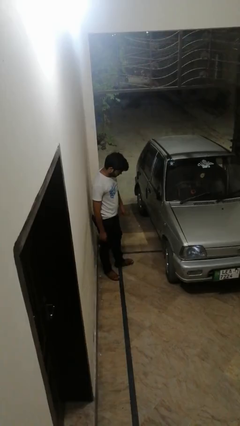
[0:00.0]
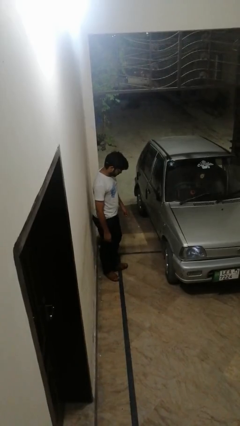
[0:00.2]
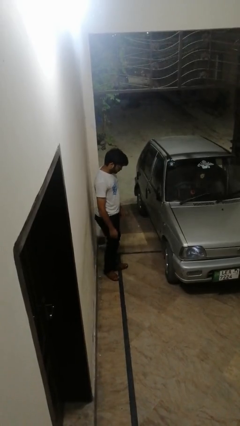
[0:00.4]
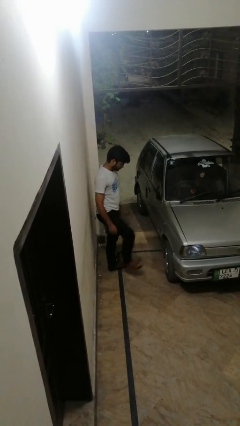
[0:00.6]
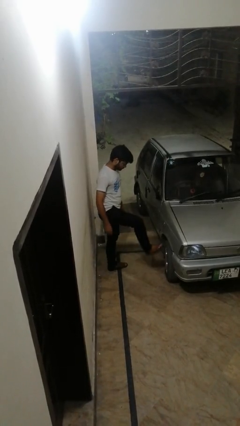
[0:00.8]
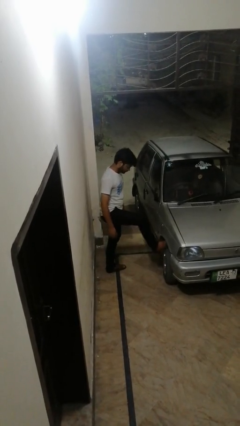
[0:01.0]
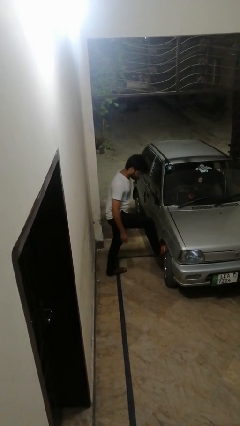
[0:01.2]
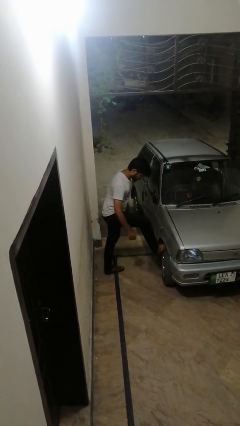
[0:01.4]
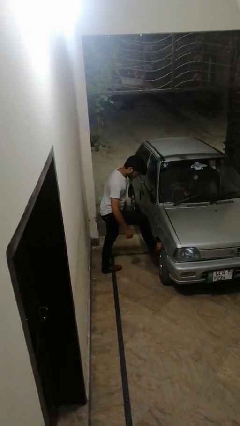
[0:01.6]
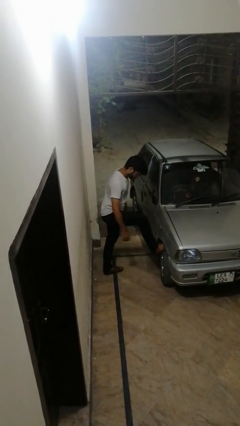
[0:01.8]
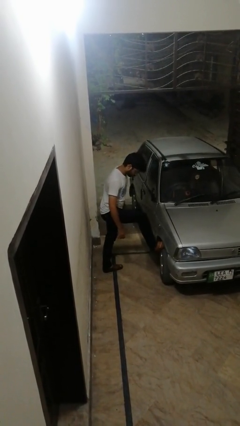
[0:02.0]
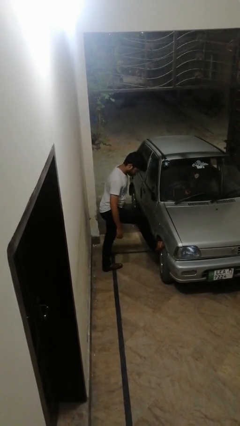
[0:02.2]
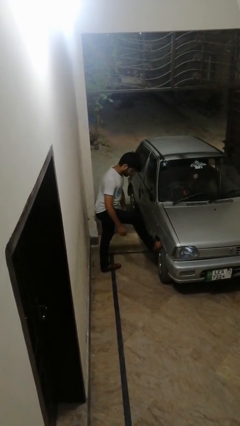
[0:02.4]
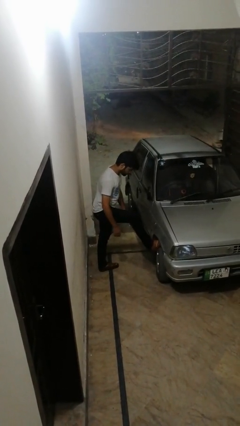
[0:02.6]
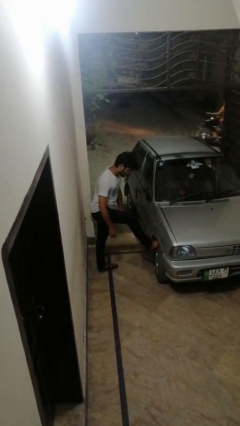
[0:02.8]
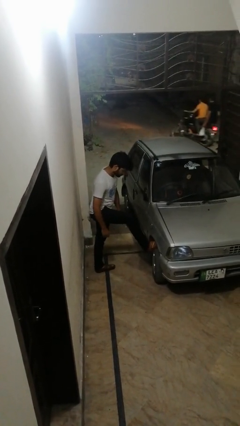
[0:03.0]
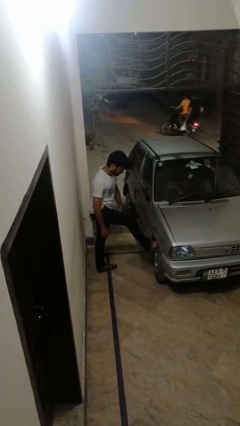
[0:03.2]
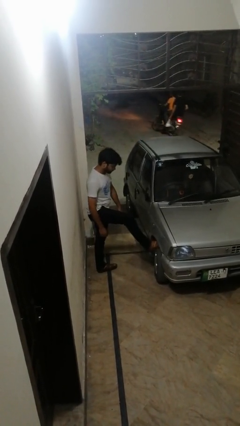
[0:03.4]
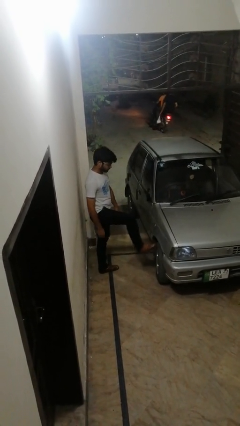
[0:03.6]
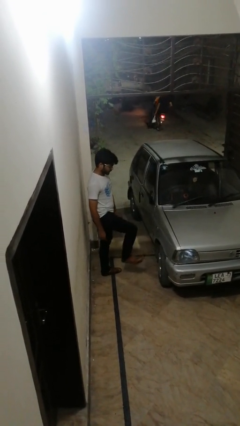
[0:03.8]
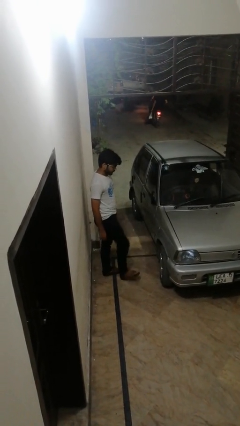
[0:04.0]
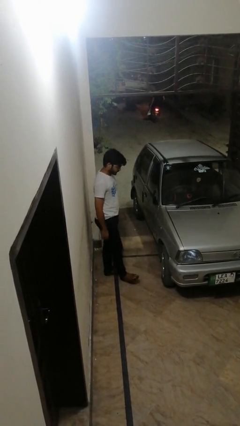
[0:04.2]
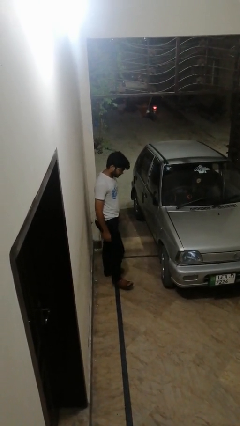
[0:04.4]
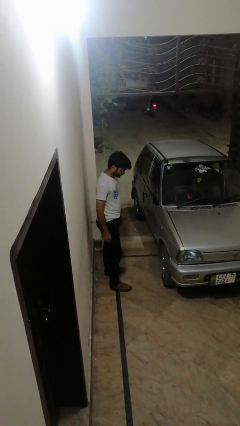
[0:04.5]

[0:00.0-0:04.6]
person kicks car tires

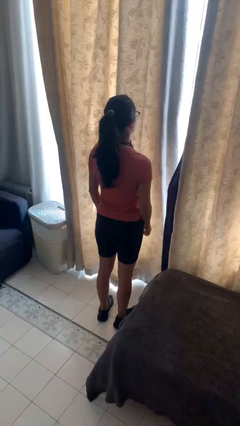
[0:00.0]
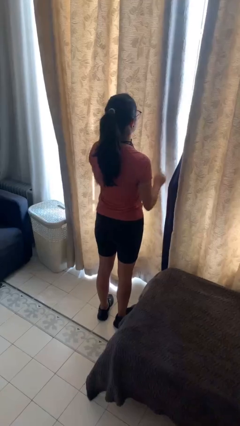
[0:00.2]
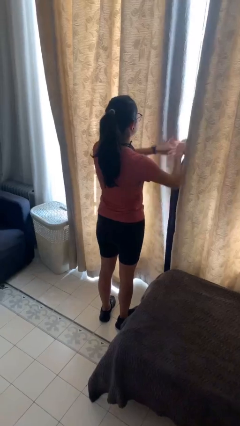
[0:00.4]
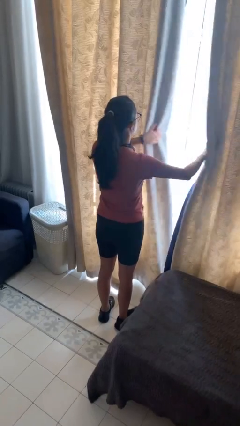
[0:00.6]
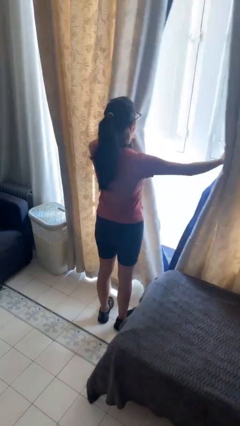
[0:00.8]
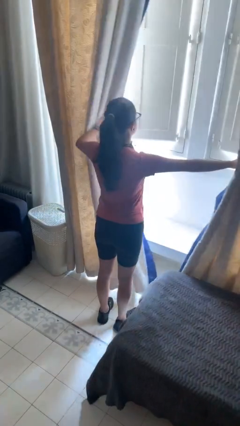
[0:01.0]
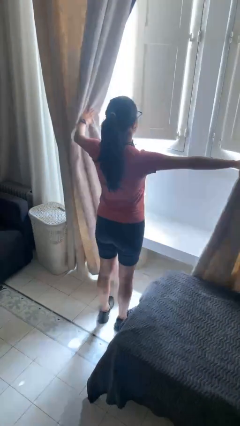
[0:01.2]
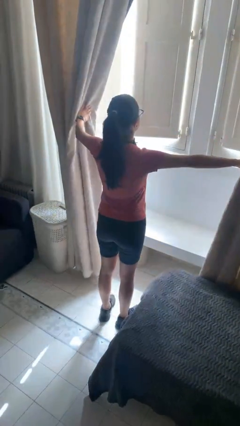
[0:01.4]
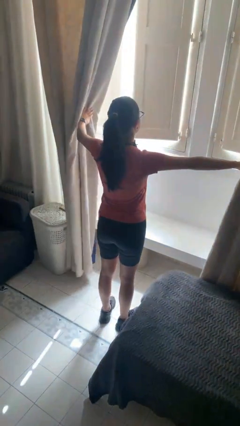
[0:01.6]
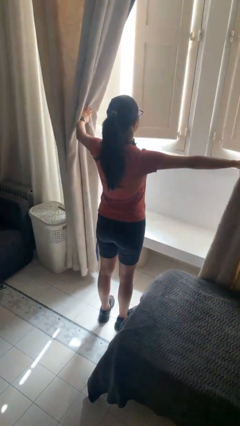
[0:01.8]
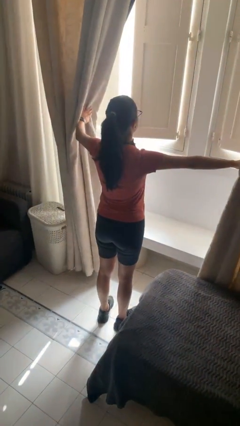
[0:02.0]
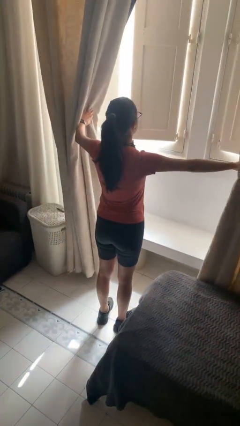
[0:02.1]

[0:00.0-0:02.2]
person opens curtains

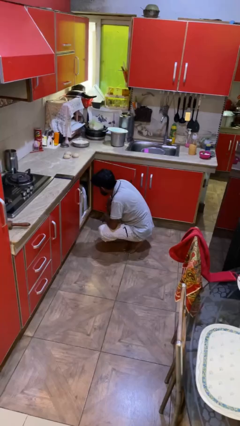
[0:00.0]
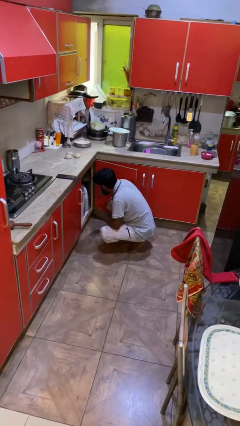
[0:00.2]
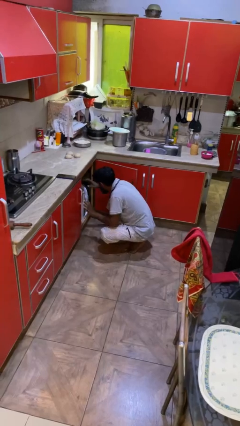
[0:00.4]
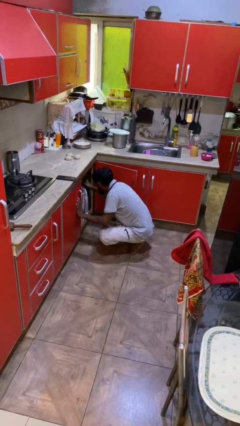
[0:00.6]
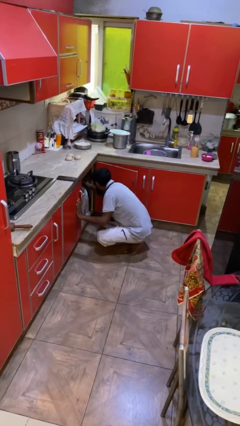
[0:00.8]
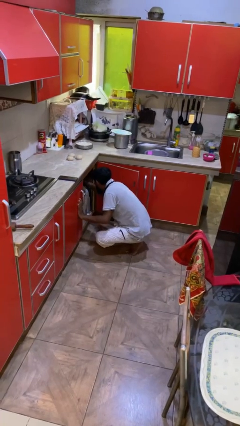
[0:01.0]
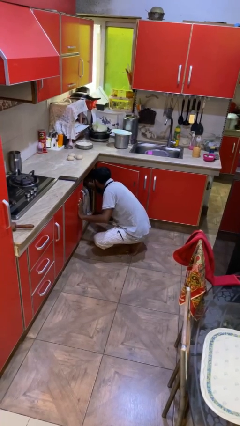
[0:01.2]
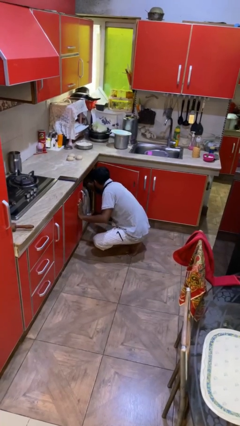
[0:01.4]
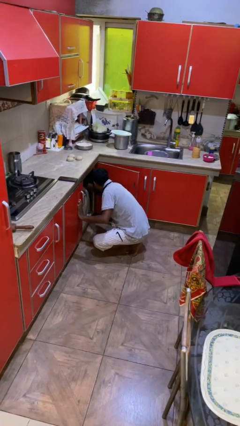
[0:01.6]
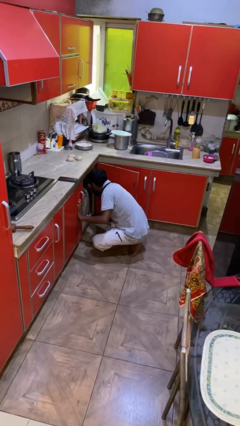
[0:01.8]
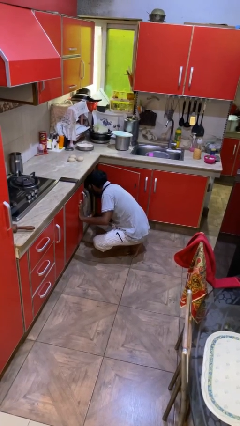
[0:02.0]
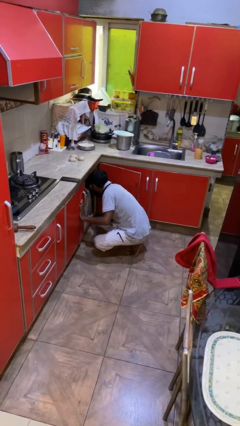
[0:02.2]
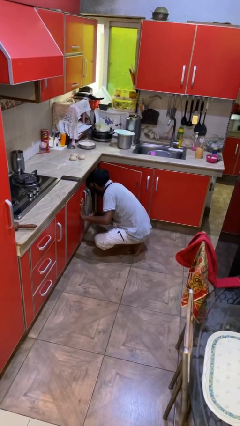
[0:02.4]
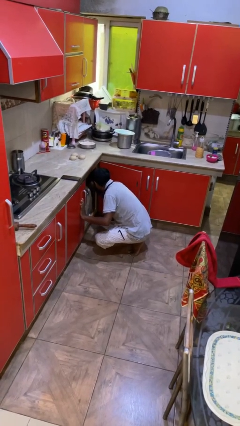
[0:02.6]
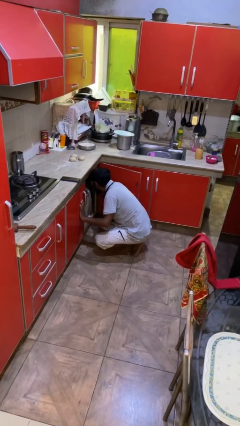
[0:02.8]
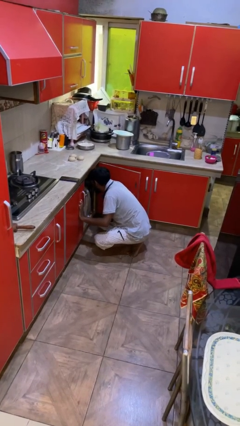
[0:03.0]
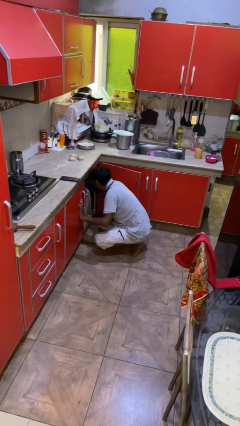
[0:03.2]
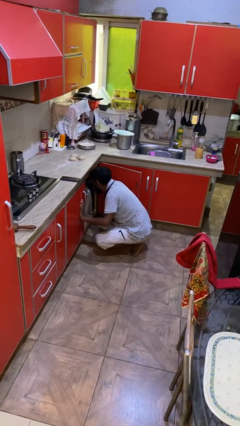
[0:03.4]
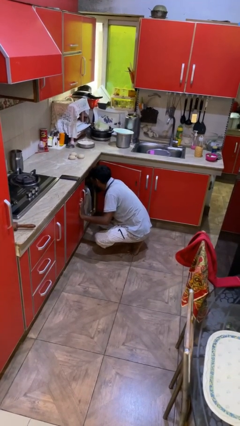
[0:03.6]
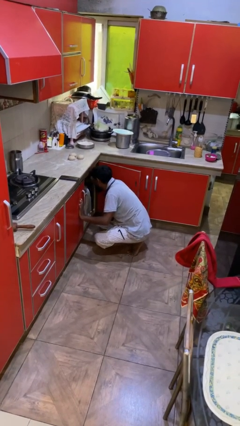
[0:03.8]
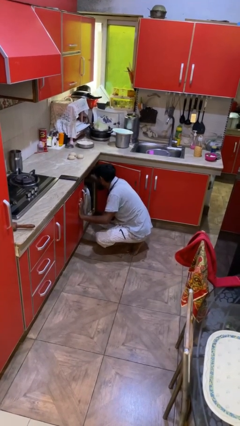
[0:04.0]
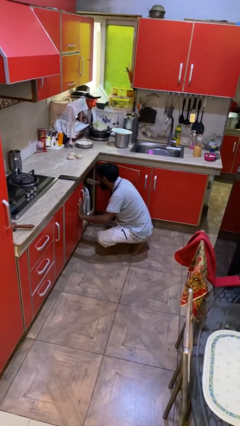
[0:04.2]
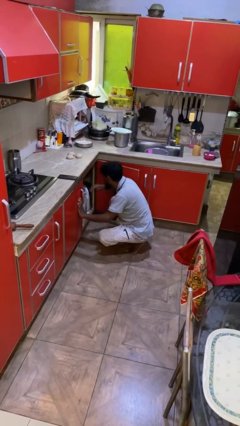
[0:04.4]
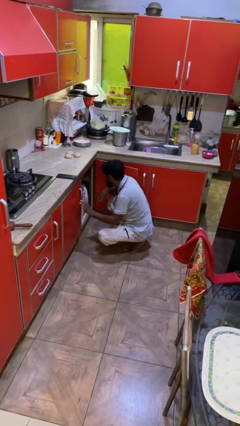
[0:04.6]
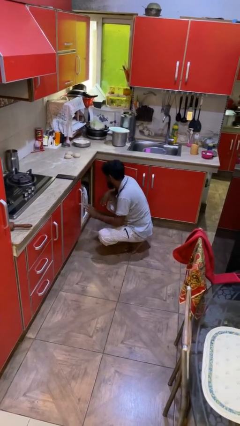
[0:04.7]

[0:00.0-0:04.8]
person searches in cabinet

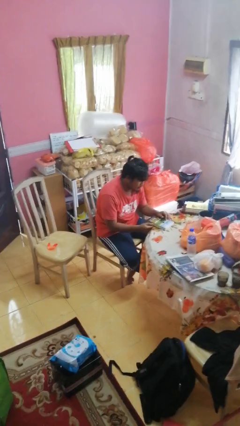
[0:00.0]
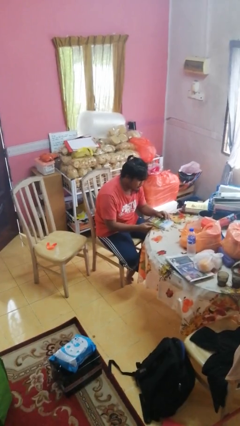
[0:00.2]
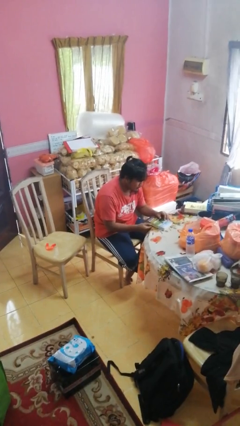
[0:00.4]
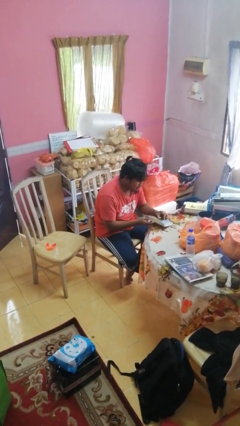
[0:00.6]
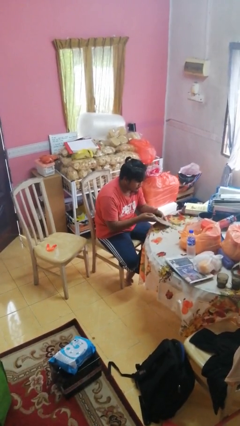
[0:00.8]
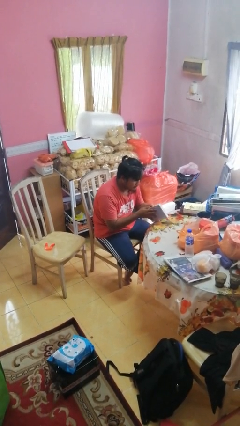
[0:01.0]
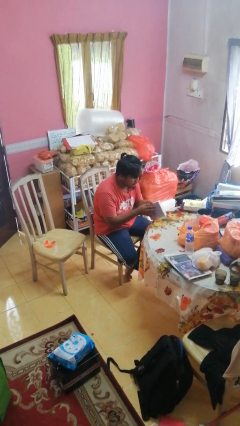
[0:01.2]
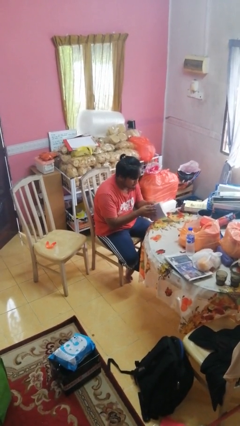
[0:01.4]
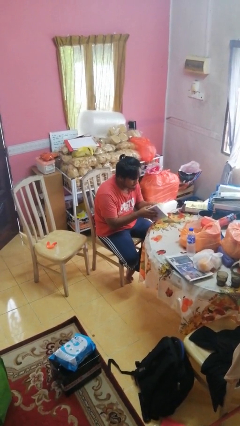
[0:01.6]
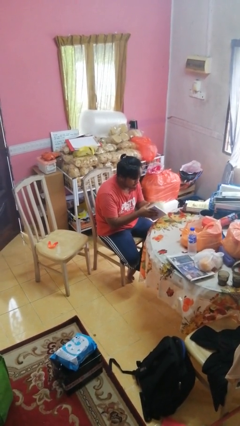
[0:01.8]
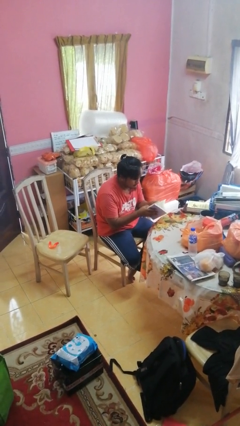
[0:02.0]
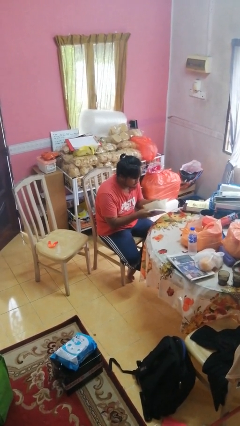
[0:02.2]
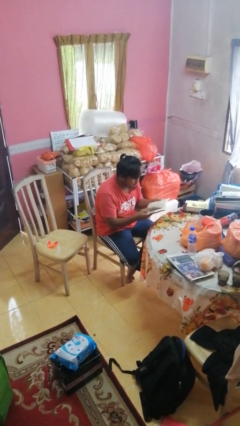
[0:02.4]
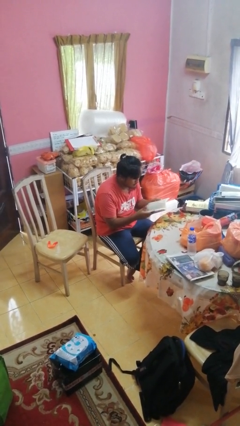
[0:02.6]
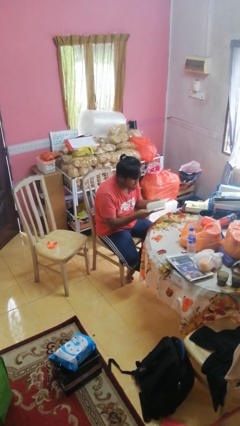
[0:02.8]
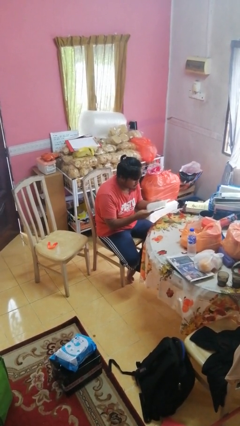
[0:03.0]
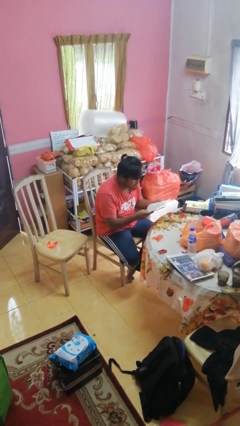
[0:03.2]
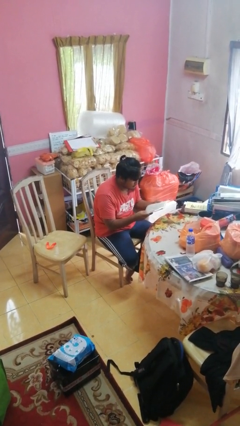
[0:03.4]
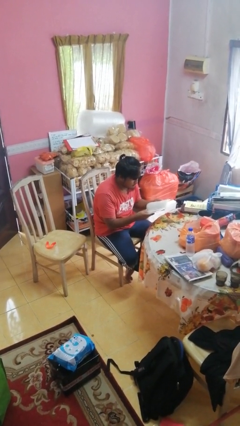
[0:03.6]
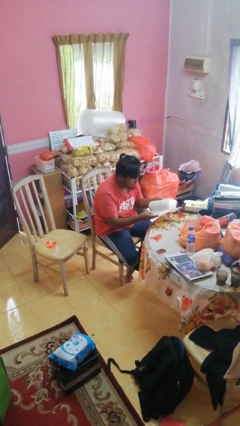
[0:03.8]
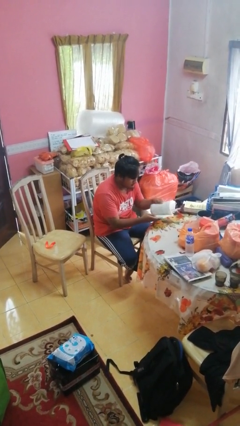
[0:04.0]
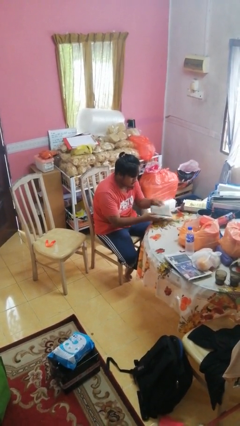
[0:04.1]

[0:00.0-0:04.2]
person reads book

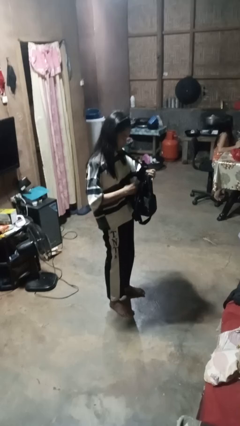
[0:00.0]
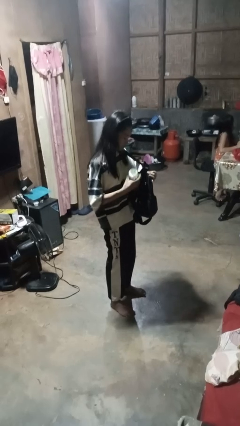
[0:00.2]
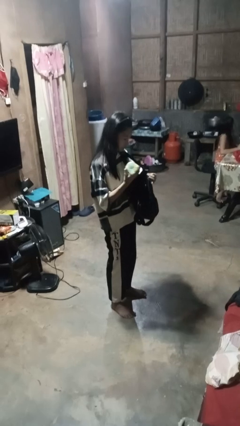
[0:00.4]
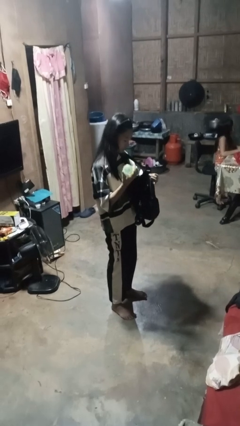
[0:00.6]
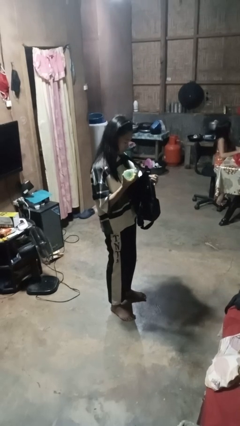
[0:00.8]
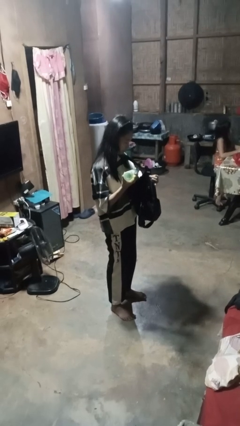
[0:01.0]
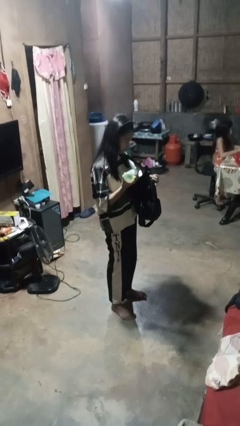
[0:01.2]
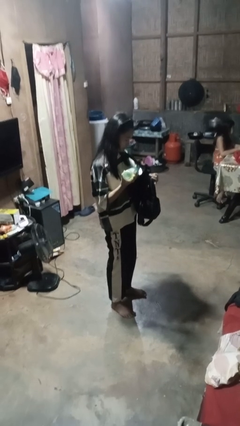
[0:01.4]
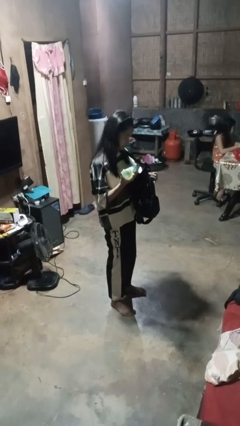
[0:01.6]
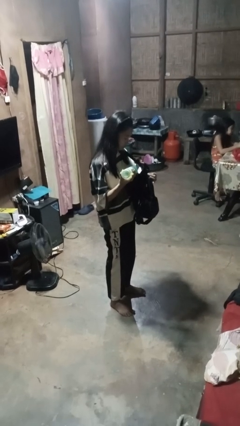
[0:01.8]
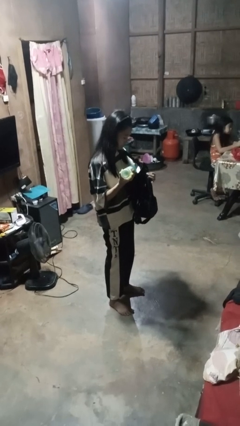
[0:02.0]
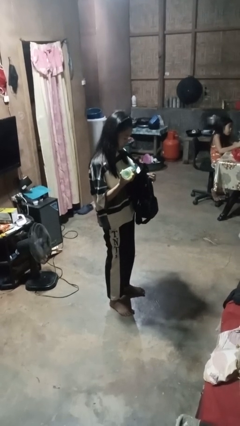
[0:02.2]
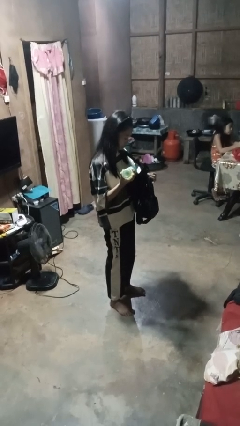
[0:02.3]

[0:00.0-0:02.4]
person takes object from backpack
